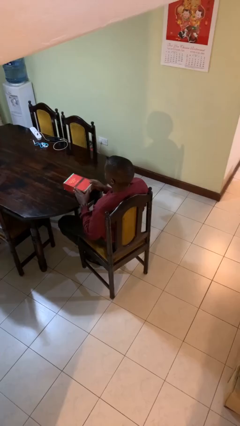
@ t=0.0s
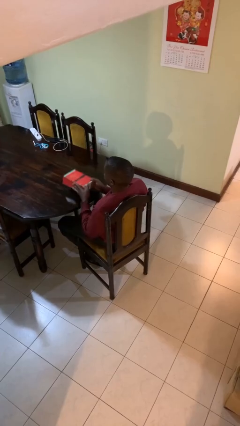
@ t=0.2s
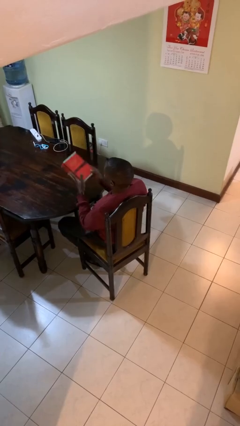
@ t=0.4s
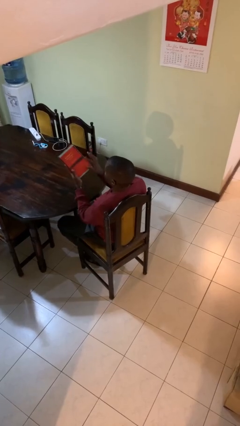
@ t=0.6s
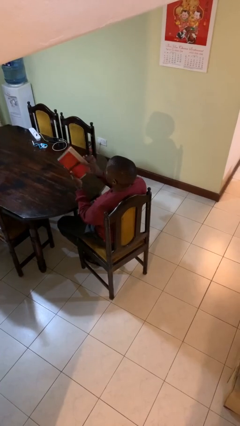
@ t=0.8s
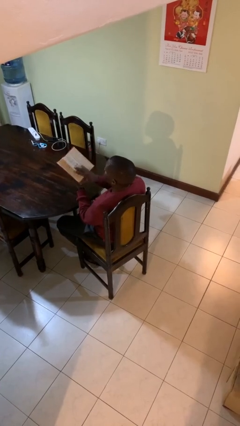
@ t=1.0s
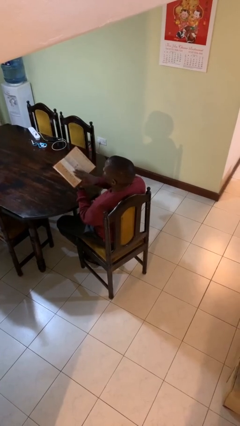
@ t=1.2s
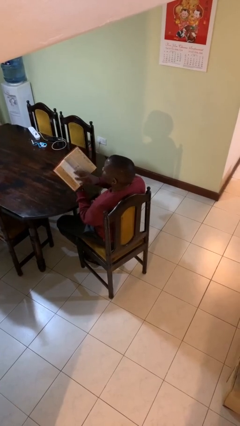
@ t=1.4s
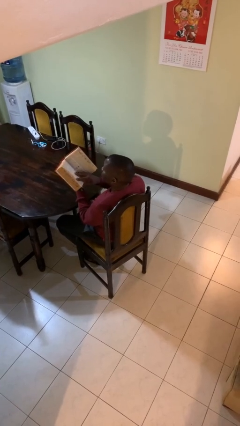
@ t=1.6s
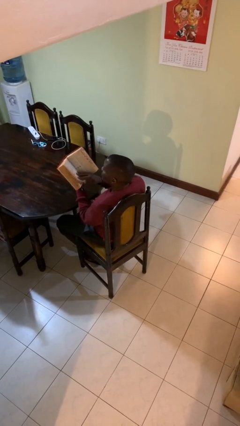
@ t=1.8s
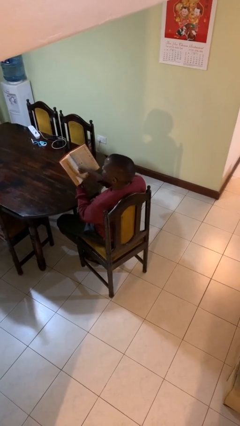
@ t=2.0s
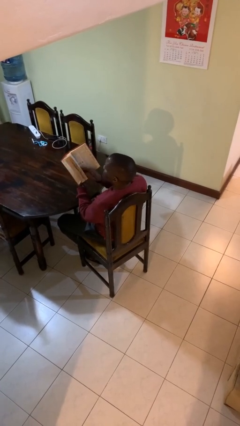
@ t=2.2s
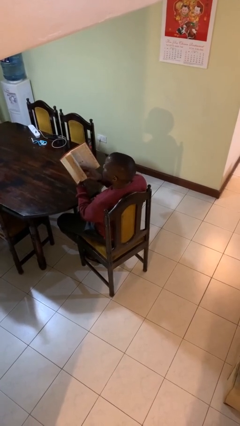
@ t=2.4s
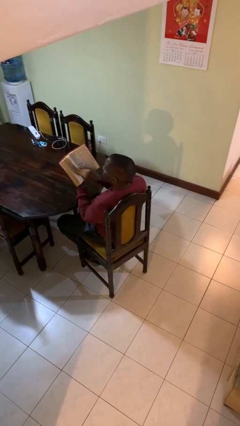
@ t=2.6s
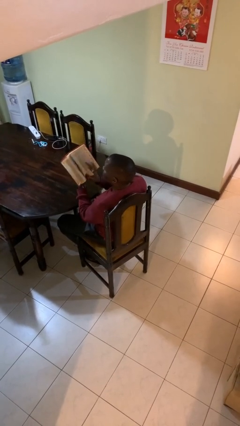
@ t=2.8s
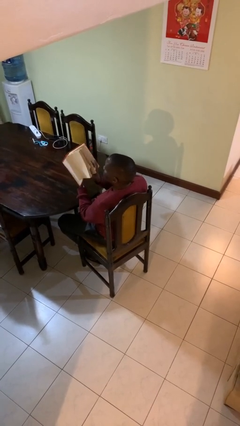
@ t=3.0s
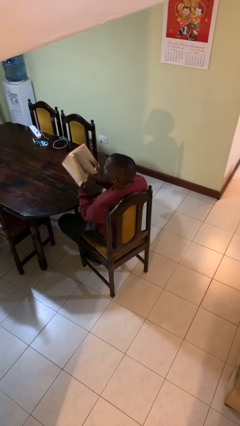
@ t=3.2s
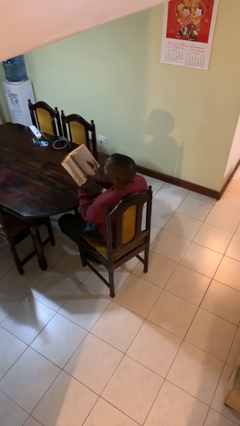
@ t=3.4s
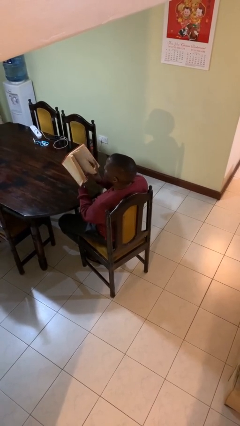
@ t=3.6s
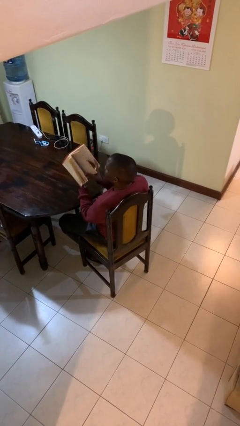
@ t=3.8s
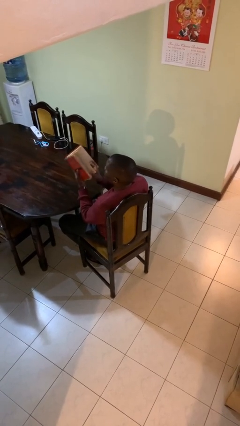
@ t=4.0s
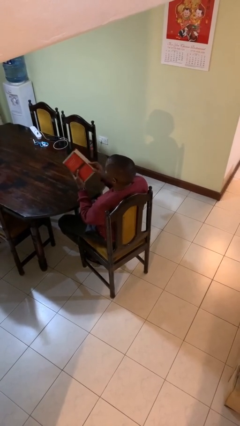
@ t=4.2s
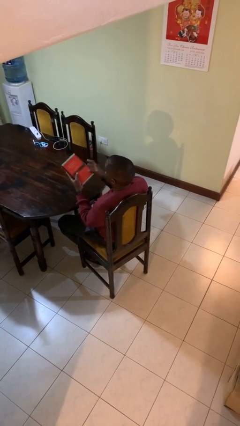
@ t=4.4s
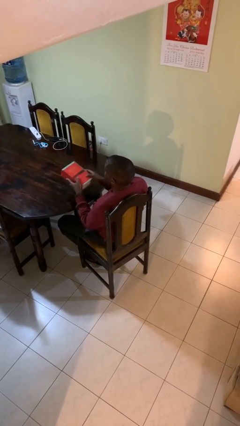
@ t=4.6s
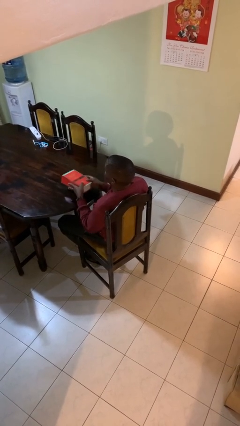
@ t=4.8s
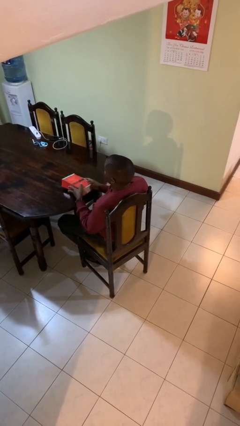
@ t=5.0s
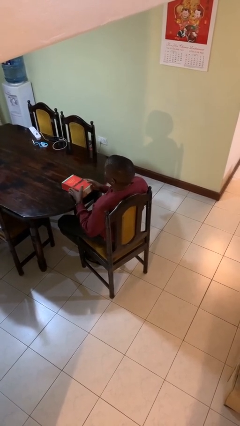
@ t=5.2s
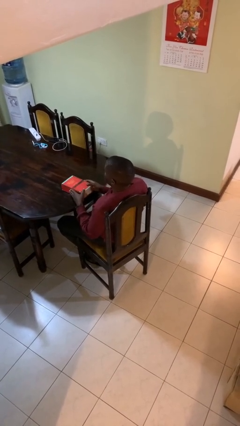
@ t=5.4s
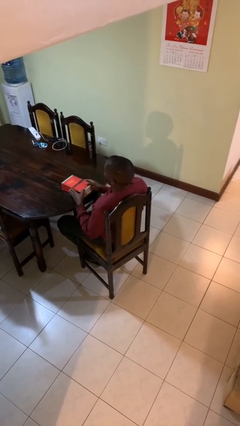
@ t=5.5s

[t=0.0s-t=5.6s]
person reads book

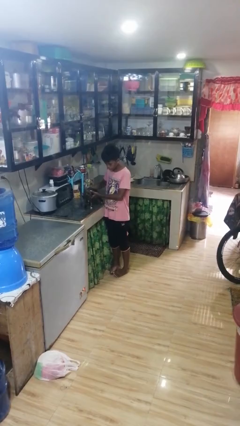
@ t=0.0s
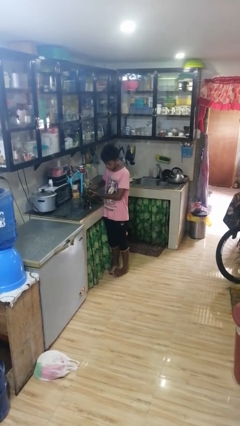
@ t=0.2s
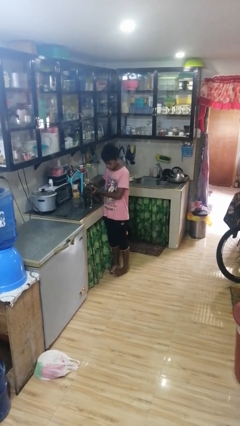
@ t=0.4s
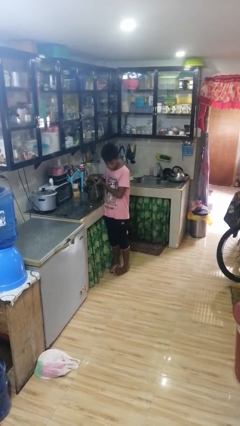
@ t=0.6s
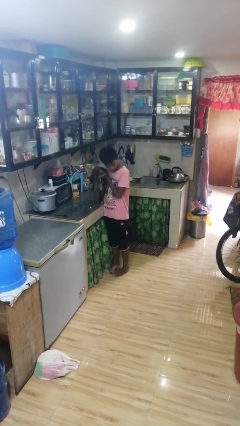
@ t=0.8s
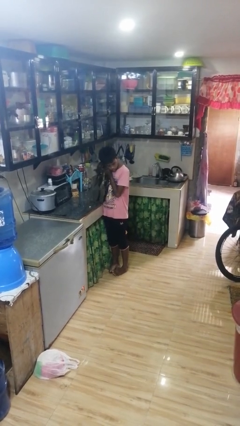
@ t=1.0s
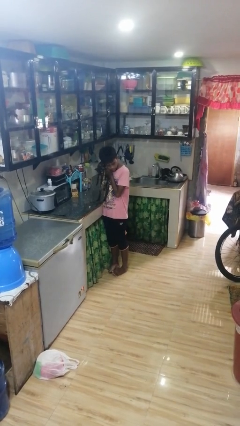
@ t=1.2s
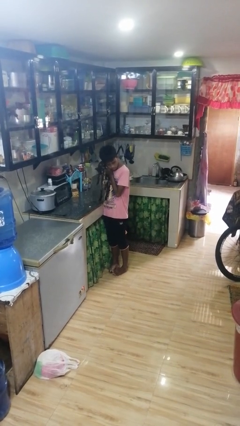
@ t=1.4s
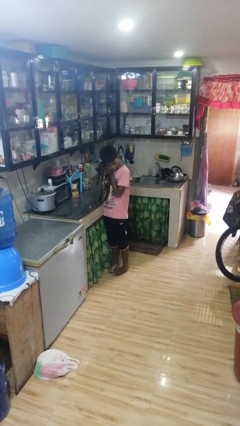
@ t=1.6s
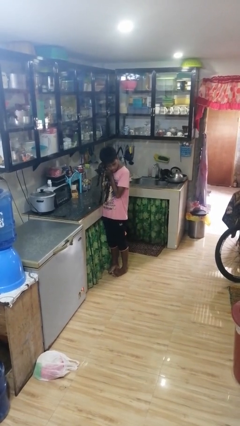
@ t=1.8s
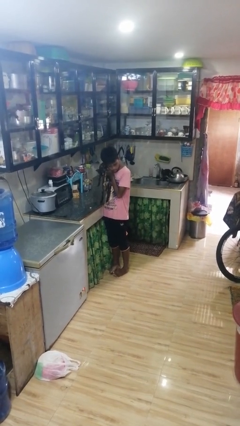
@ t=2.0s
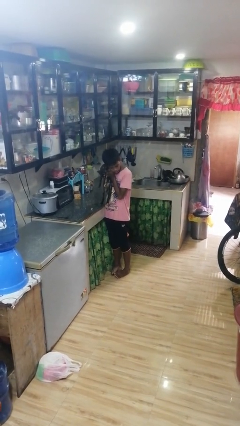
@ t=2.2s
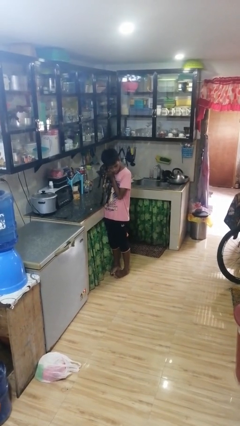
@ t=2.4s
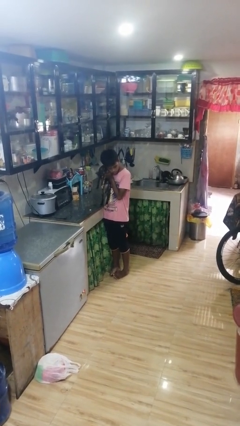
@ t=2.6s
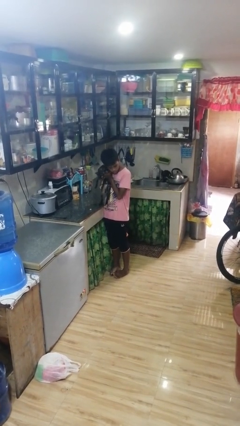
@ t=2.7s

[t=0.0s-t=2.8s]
person hugs cat

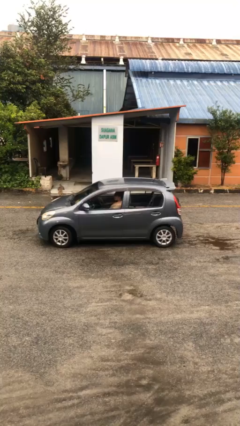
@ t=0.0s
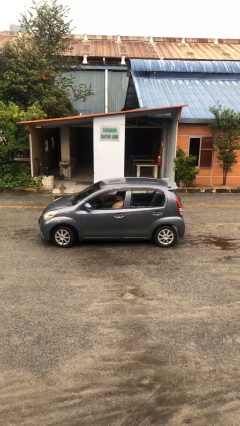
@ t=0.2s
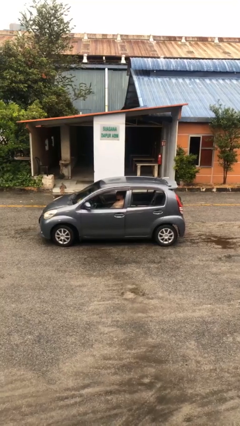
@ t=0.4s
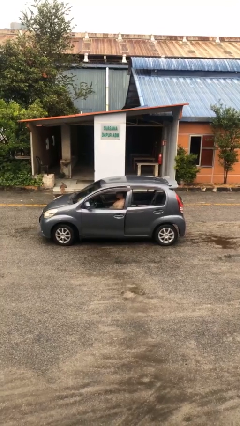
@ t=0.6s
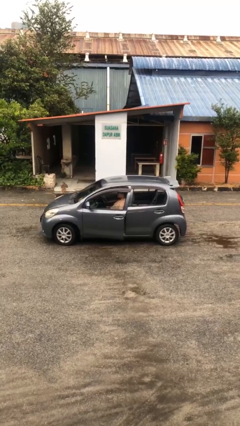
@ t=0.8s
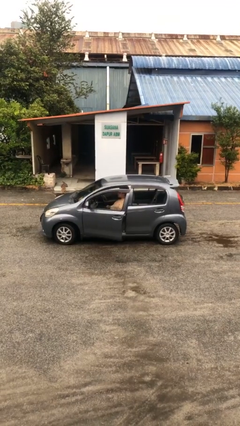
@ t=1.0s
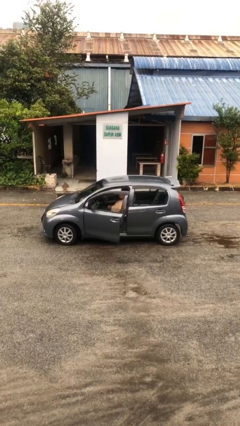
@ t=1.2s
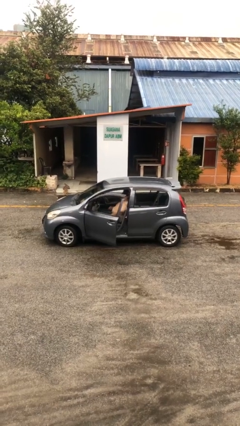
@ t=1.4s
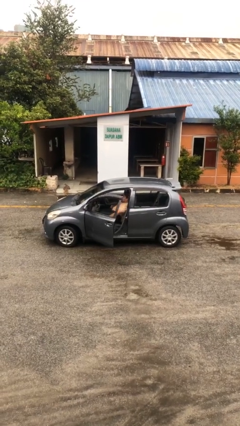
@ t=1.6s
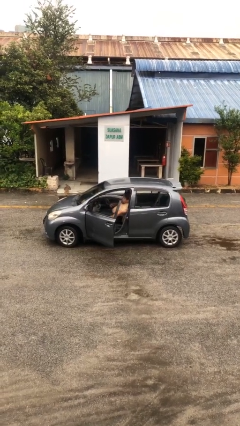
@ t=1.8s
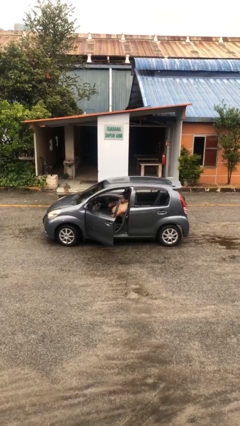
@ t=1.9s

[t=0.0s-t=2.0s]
person opens car door

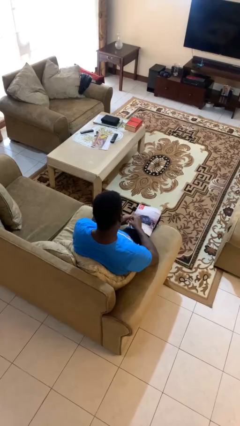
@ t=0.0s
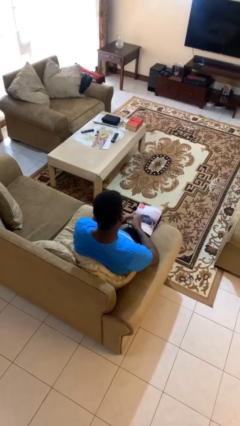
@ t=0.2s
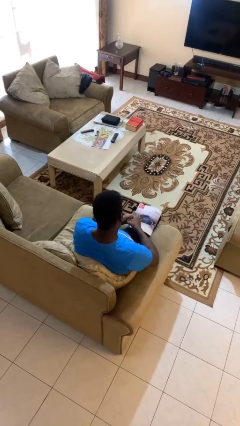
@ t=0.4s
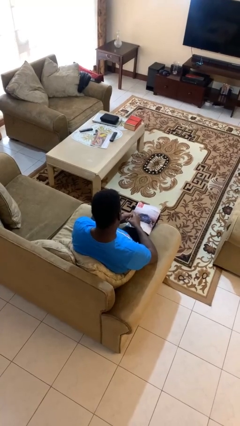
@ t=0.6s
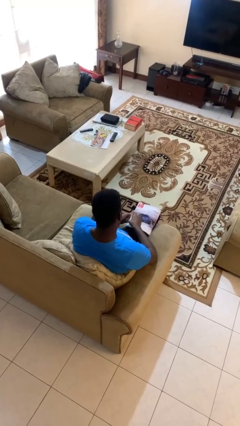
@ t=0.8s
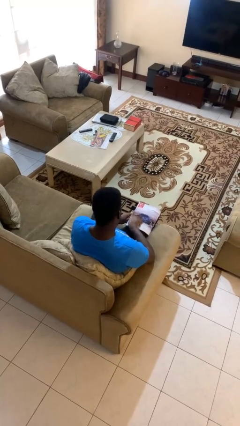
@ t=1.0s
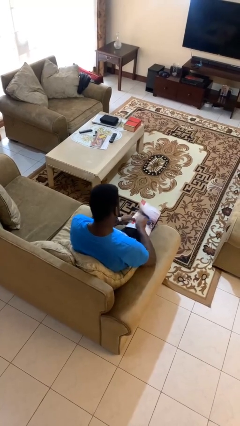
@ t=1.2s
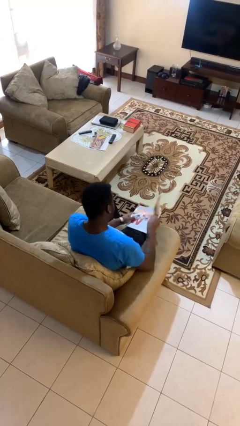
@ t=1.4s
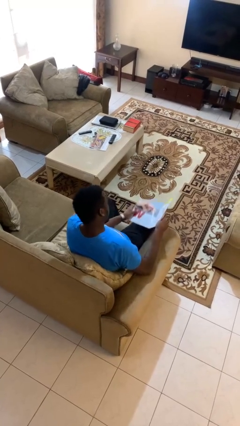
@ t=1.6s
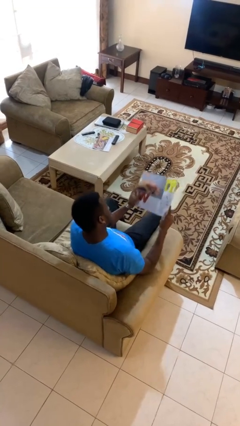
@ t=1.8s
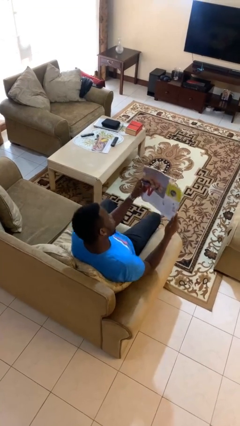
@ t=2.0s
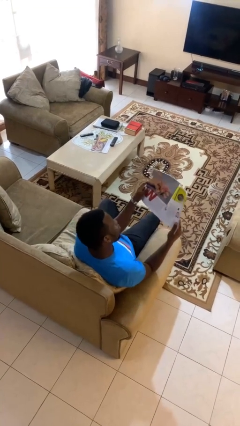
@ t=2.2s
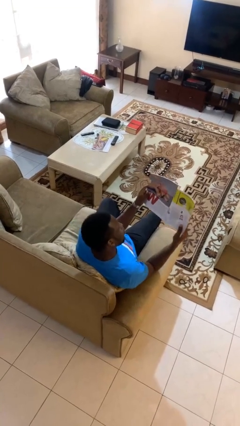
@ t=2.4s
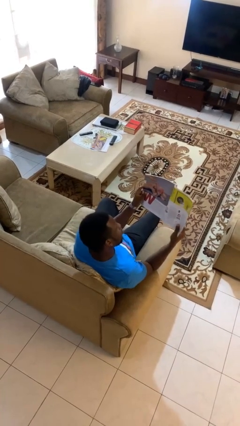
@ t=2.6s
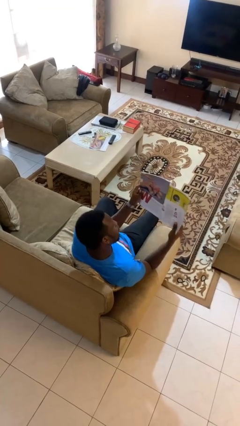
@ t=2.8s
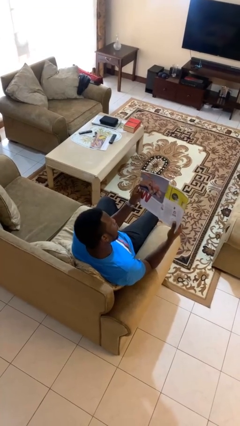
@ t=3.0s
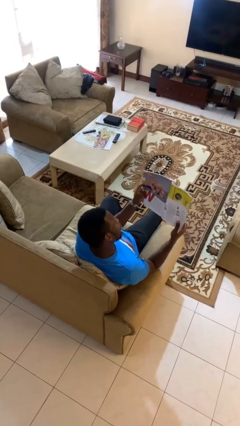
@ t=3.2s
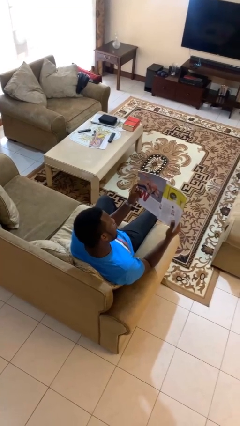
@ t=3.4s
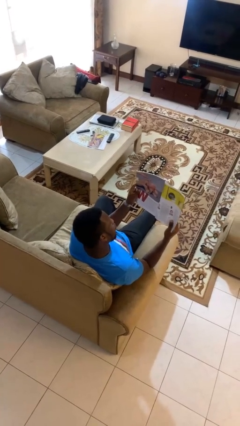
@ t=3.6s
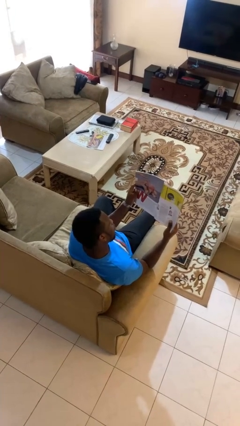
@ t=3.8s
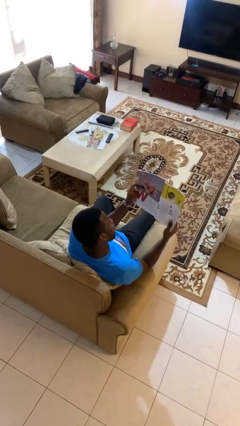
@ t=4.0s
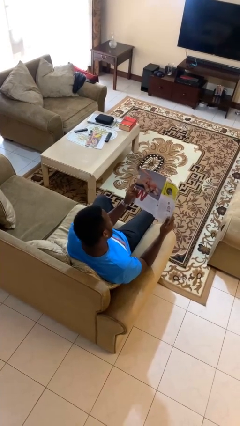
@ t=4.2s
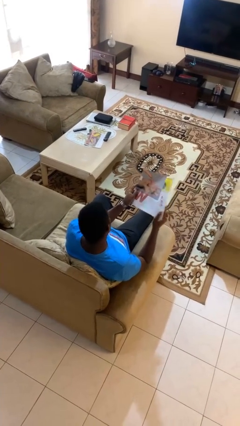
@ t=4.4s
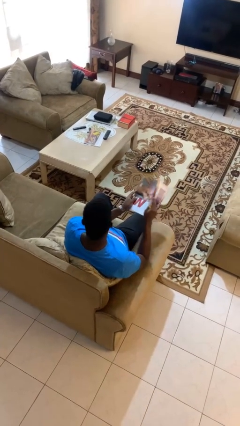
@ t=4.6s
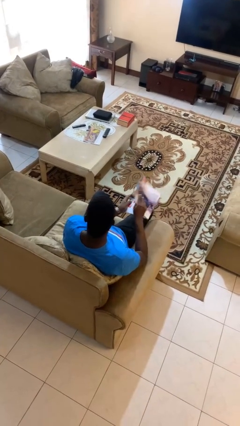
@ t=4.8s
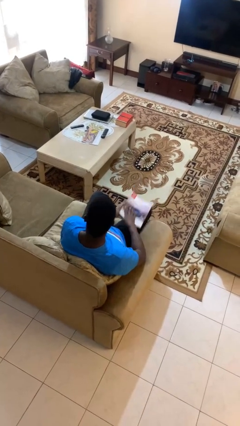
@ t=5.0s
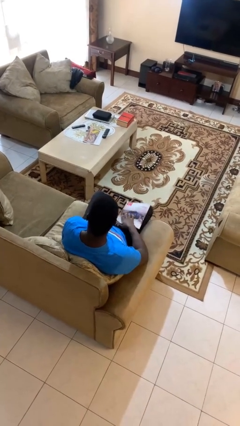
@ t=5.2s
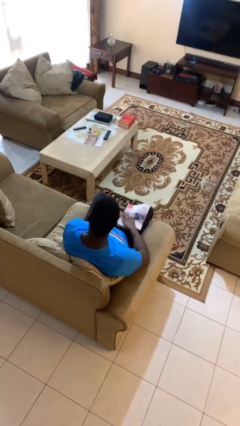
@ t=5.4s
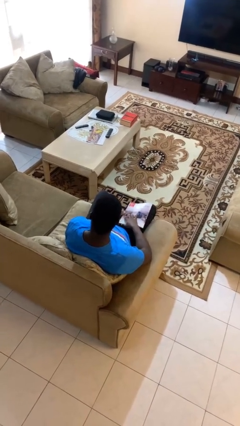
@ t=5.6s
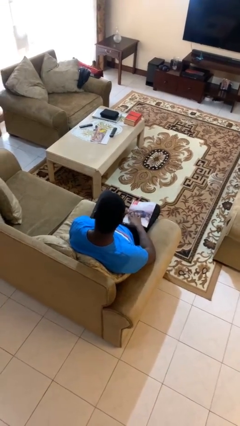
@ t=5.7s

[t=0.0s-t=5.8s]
person reads magazine

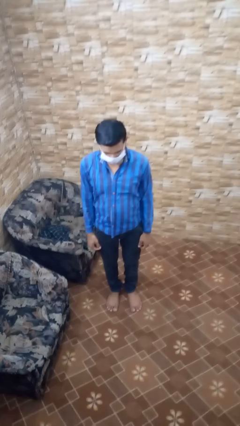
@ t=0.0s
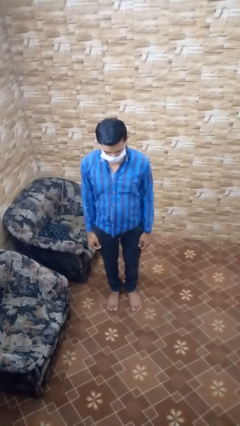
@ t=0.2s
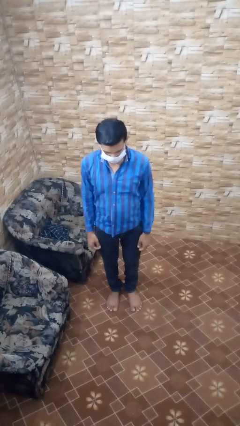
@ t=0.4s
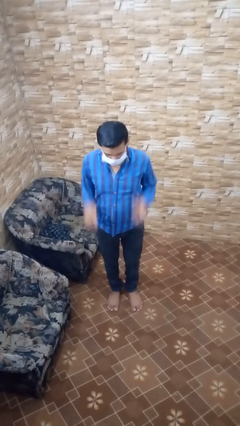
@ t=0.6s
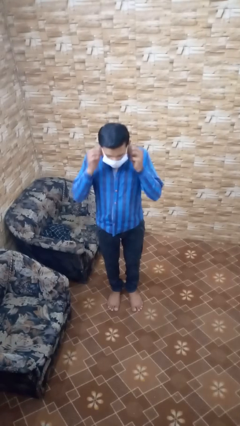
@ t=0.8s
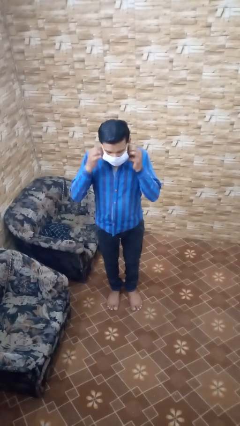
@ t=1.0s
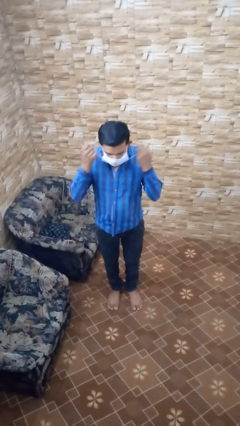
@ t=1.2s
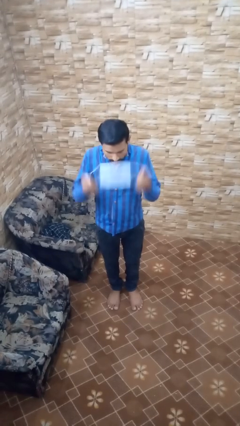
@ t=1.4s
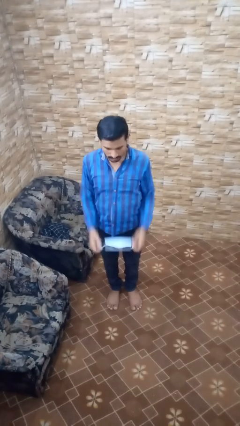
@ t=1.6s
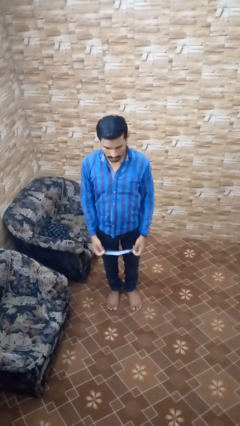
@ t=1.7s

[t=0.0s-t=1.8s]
person takes off facemask
